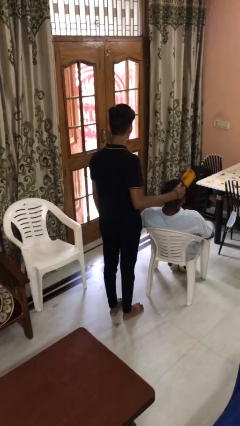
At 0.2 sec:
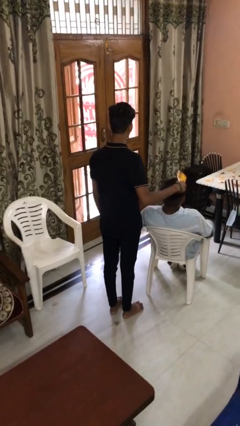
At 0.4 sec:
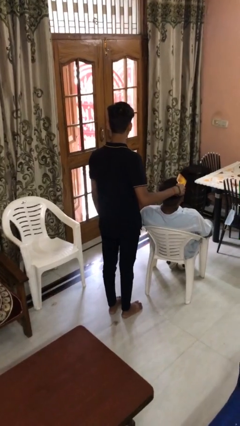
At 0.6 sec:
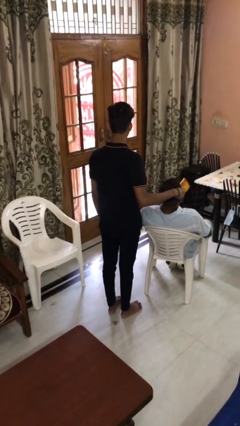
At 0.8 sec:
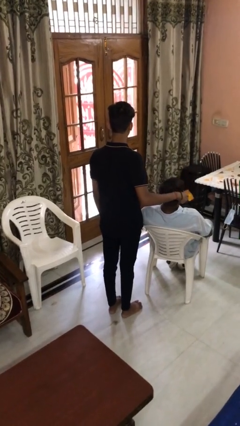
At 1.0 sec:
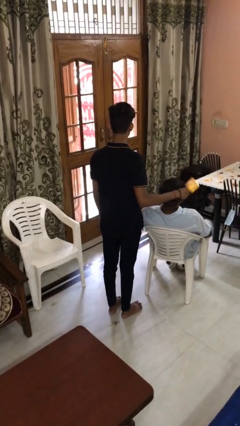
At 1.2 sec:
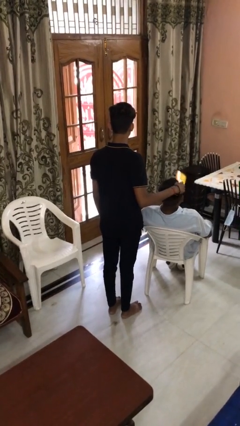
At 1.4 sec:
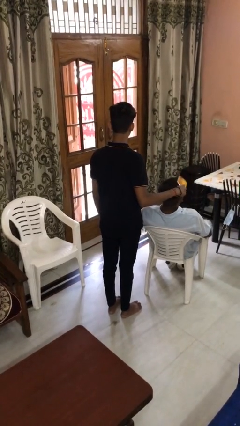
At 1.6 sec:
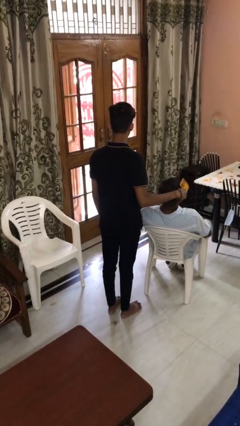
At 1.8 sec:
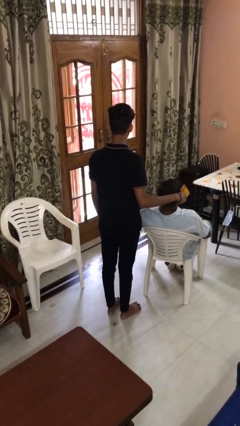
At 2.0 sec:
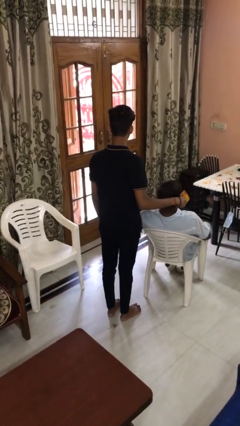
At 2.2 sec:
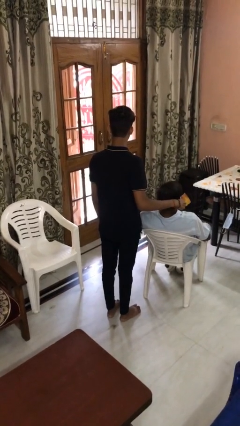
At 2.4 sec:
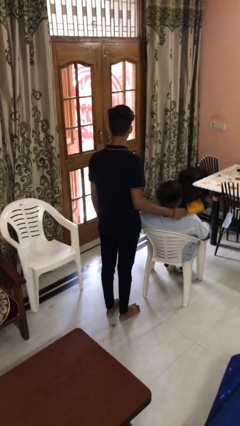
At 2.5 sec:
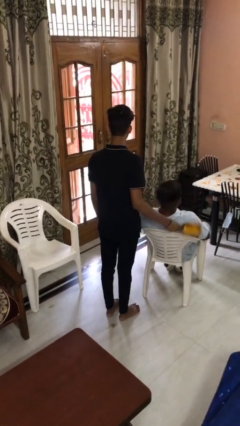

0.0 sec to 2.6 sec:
person brushes hair of person

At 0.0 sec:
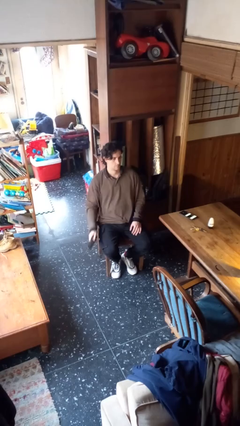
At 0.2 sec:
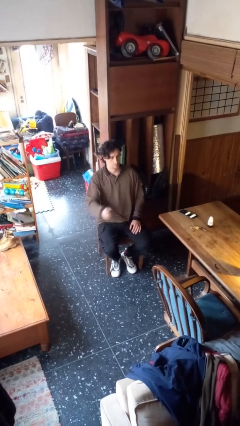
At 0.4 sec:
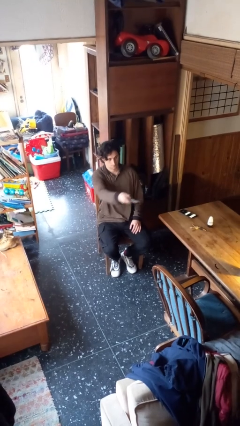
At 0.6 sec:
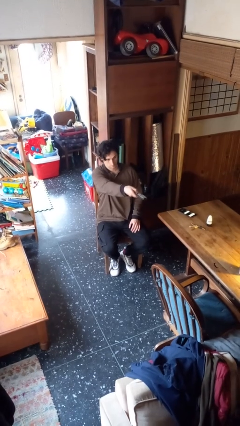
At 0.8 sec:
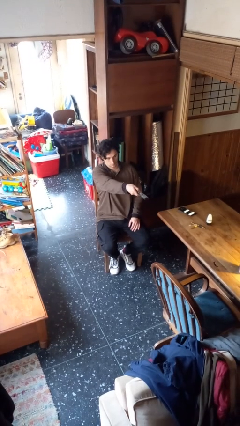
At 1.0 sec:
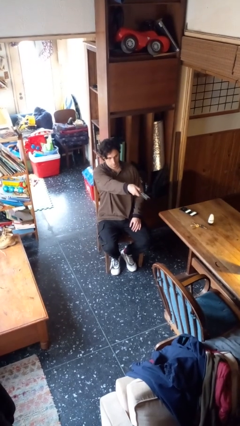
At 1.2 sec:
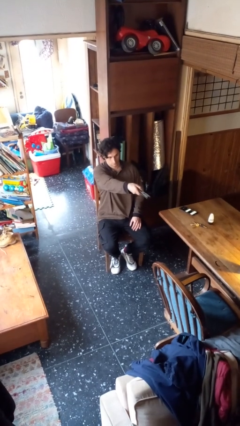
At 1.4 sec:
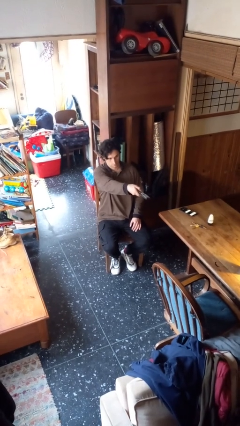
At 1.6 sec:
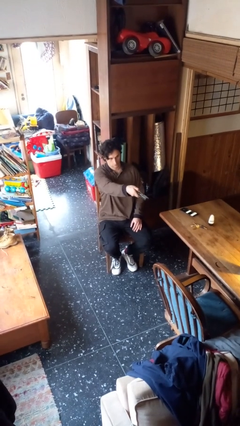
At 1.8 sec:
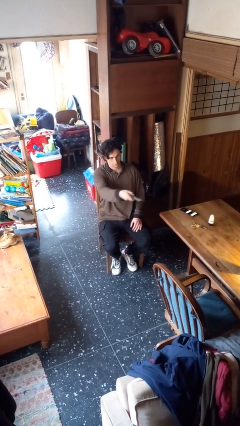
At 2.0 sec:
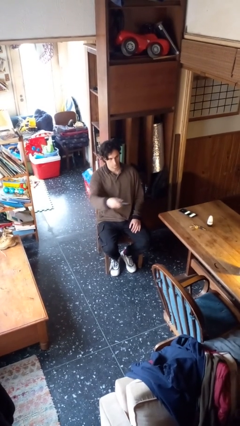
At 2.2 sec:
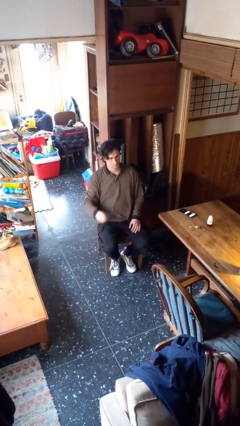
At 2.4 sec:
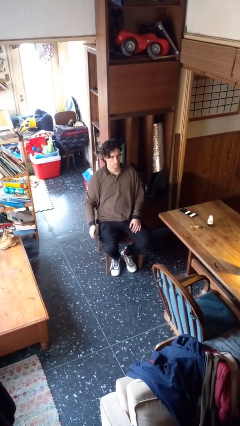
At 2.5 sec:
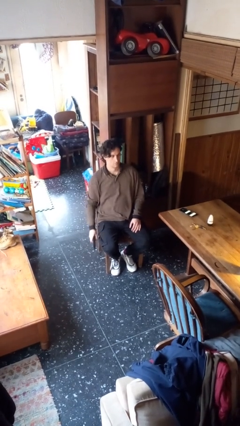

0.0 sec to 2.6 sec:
person uses television remote

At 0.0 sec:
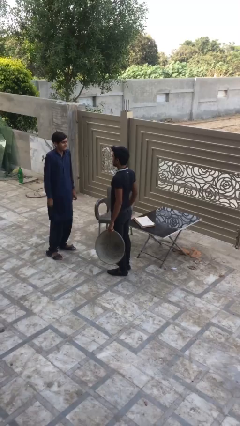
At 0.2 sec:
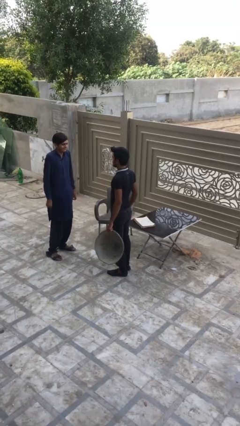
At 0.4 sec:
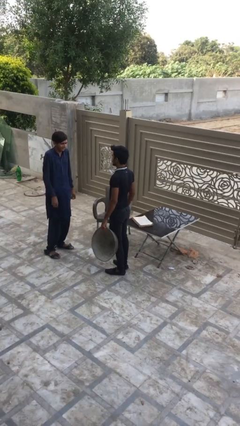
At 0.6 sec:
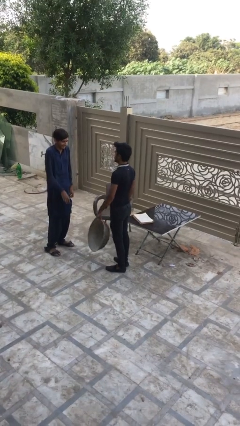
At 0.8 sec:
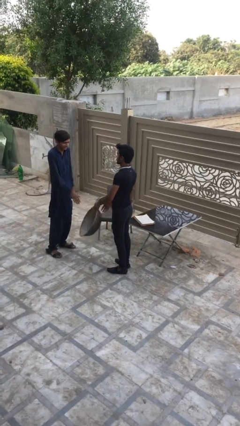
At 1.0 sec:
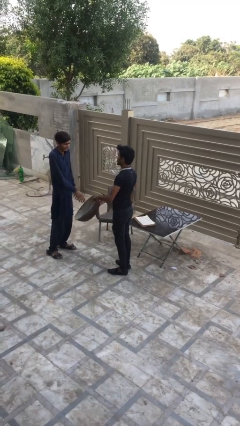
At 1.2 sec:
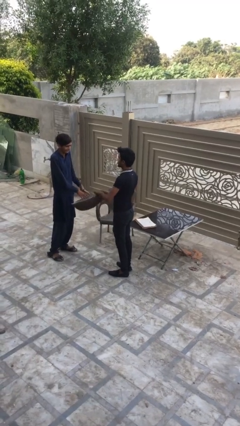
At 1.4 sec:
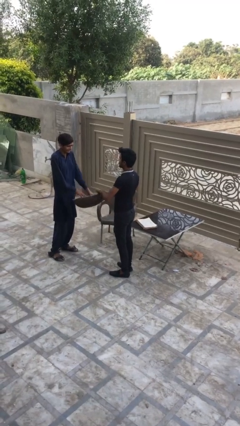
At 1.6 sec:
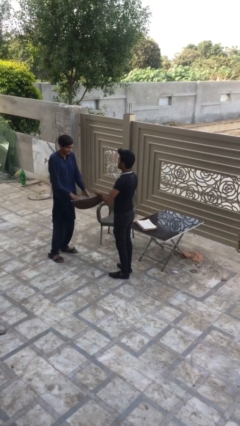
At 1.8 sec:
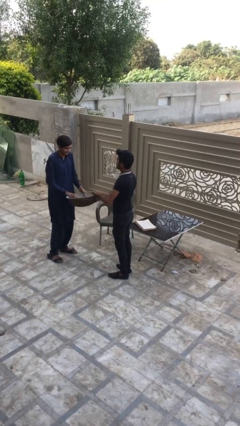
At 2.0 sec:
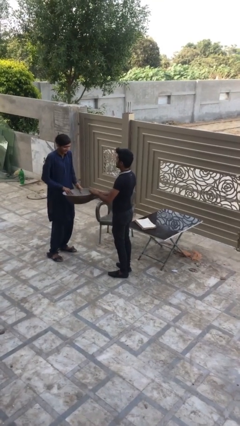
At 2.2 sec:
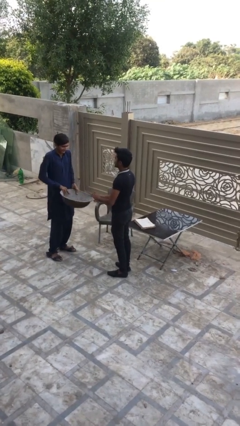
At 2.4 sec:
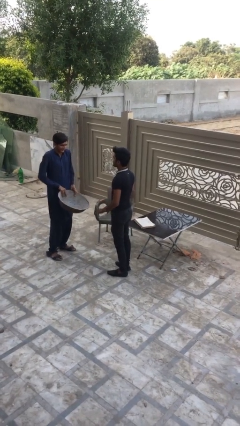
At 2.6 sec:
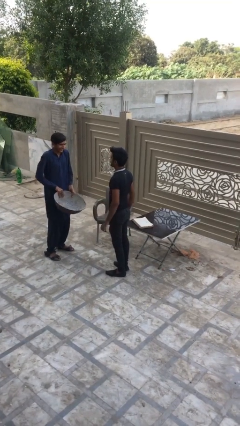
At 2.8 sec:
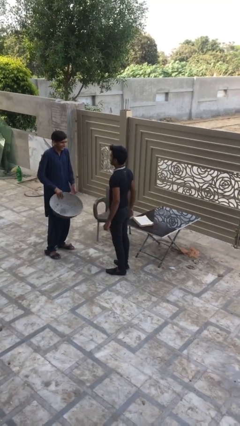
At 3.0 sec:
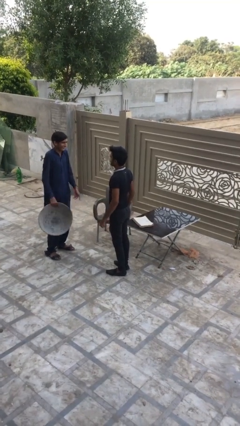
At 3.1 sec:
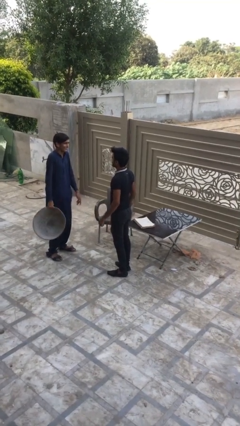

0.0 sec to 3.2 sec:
person transfers object to person

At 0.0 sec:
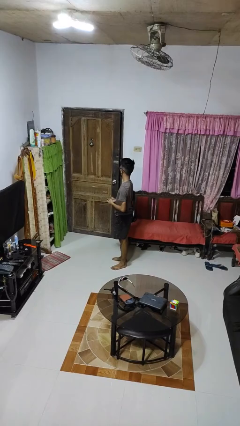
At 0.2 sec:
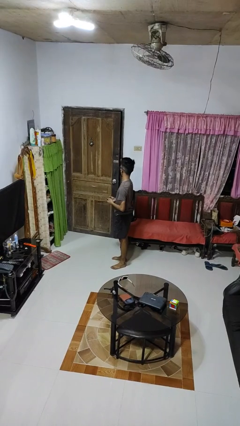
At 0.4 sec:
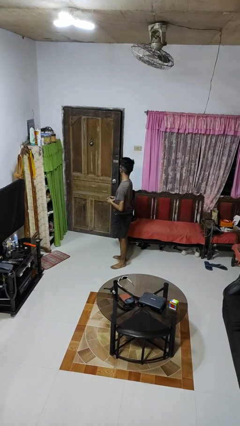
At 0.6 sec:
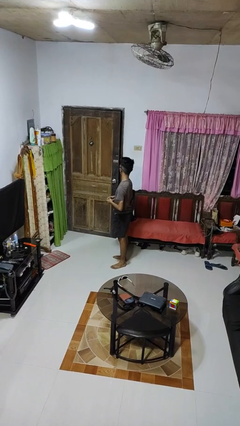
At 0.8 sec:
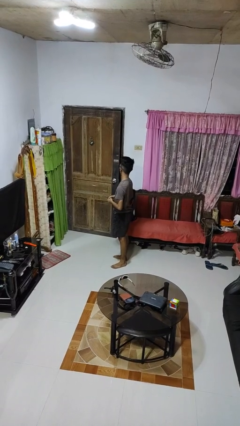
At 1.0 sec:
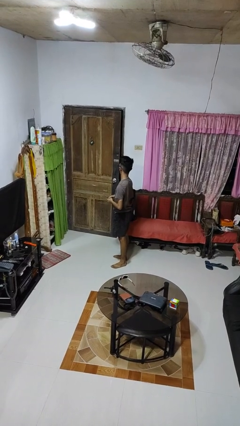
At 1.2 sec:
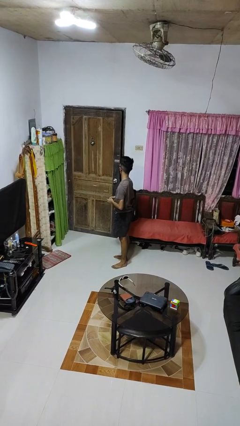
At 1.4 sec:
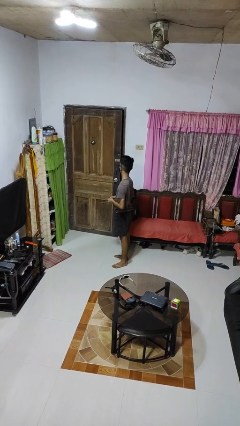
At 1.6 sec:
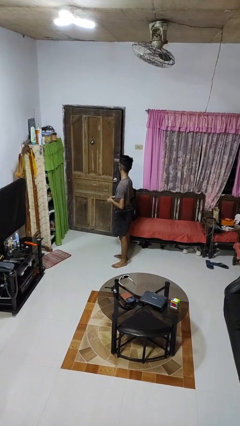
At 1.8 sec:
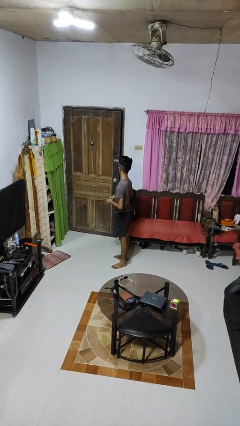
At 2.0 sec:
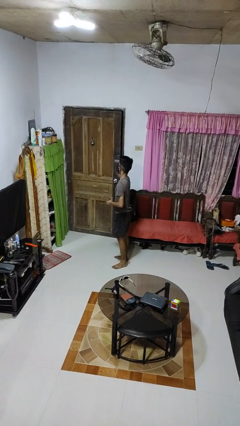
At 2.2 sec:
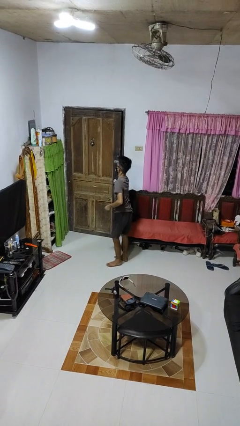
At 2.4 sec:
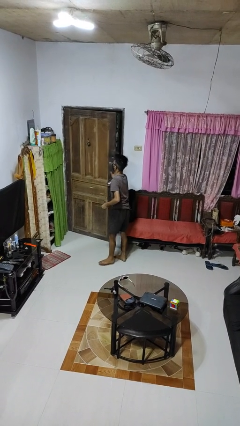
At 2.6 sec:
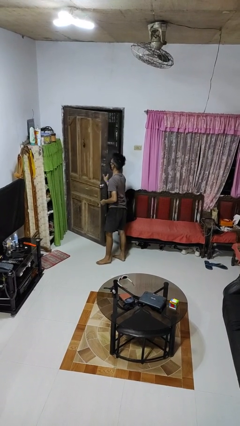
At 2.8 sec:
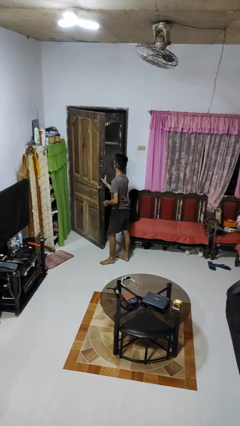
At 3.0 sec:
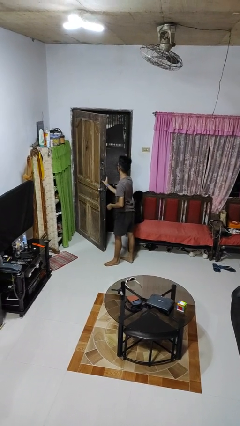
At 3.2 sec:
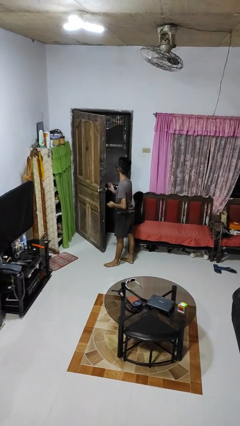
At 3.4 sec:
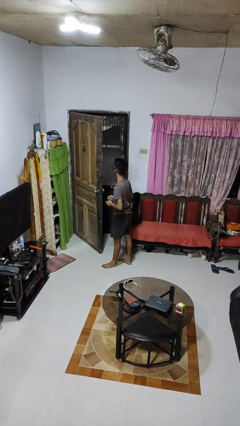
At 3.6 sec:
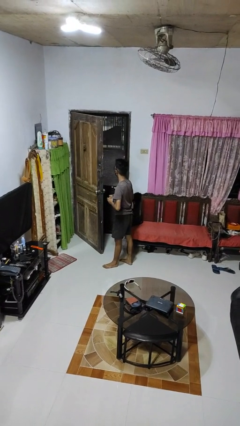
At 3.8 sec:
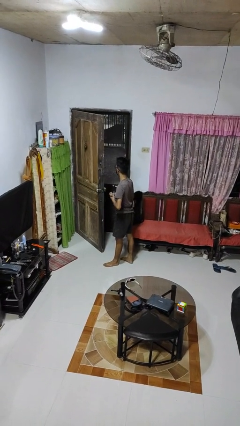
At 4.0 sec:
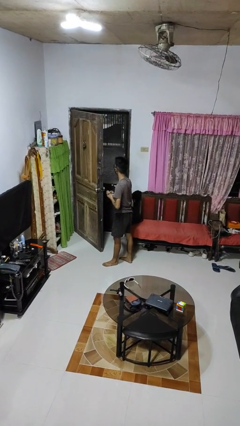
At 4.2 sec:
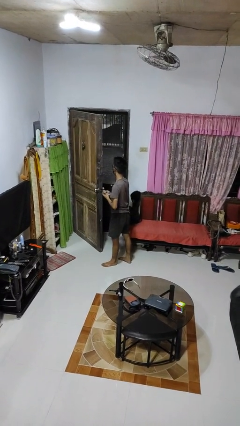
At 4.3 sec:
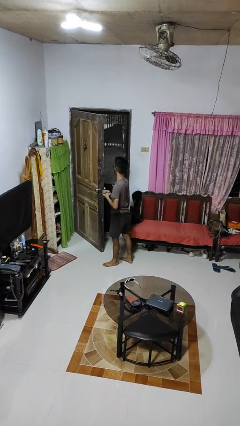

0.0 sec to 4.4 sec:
person opens facility door

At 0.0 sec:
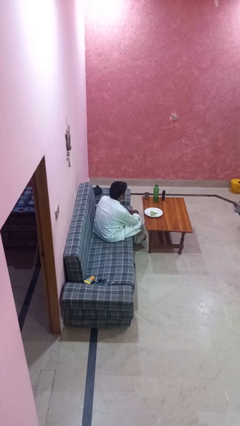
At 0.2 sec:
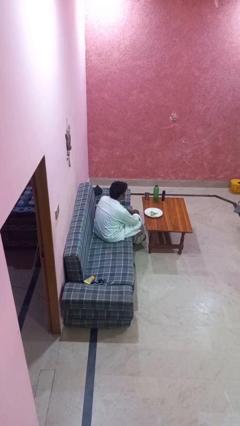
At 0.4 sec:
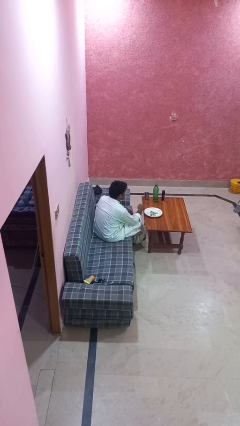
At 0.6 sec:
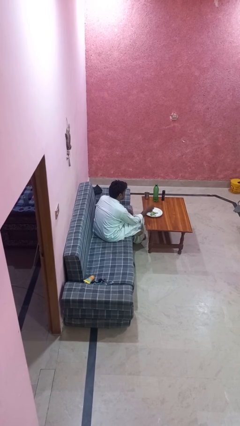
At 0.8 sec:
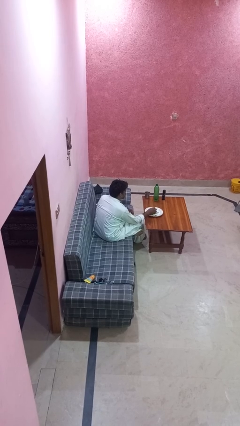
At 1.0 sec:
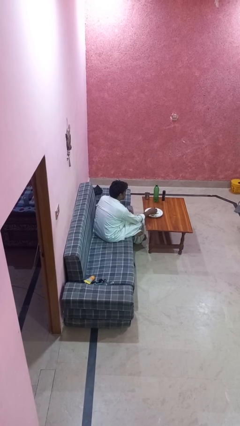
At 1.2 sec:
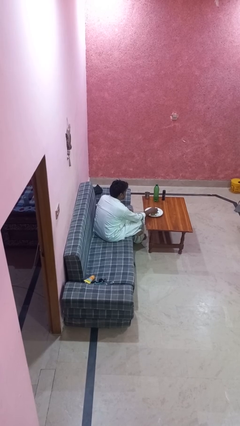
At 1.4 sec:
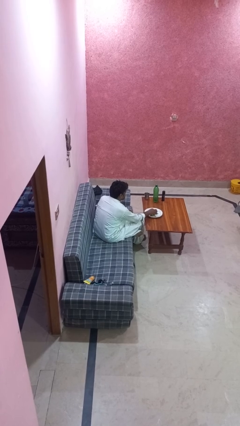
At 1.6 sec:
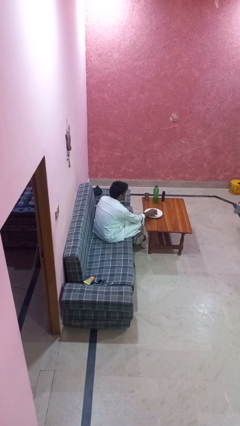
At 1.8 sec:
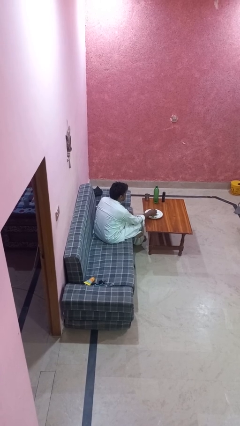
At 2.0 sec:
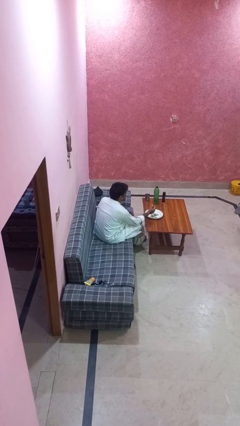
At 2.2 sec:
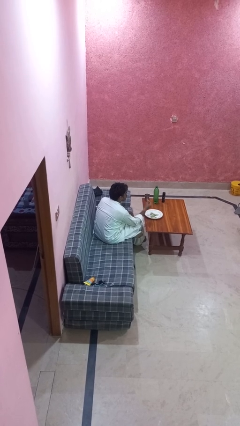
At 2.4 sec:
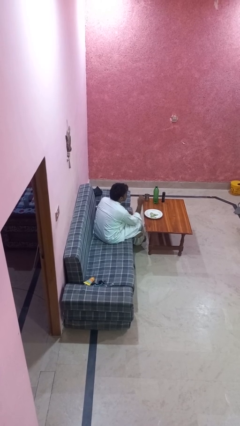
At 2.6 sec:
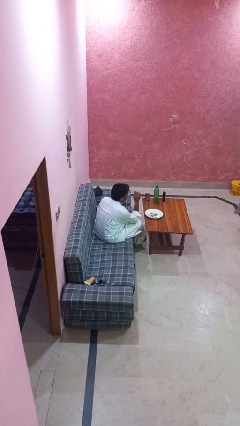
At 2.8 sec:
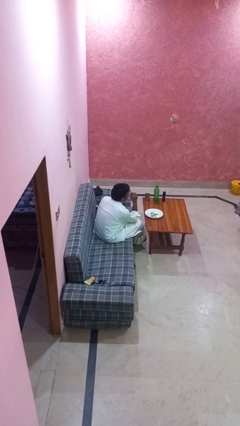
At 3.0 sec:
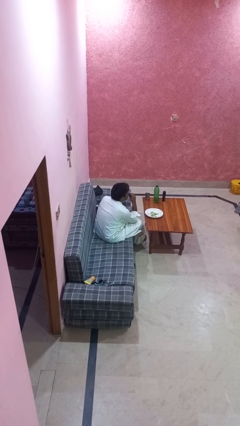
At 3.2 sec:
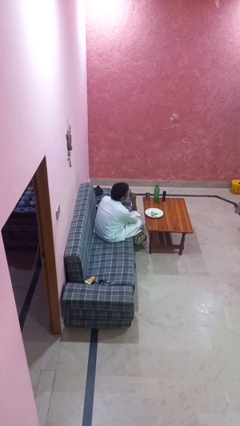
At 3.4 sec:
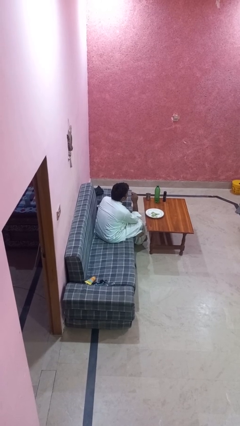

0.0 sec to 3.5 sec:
person eats with hands

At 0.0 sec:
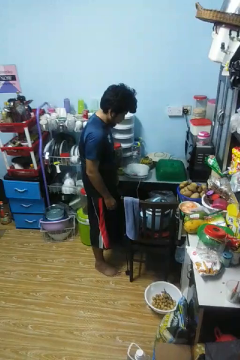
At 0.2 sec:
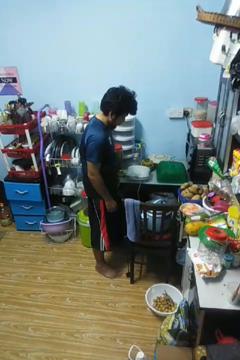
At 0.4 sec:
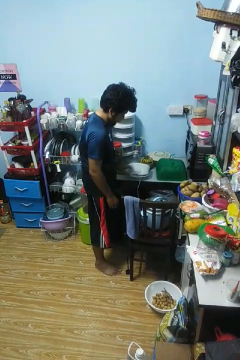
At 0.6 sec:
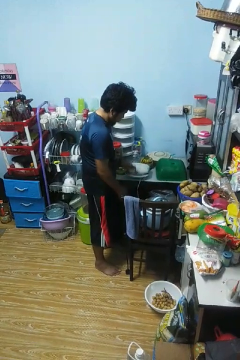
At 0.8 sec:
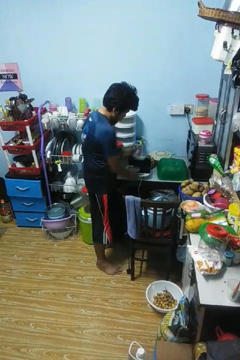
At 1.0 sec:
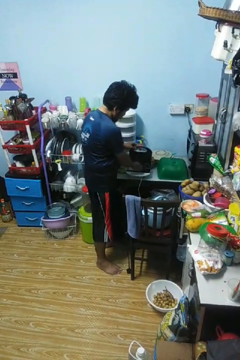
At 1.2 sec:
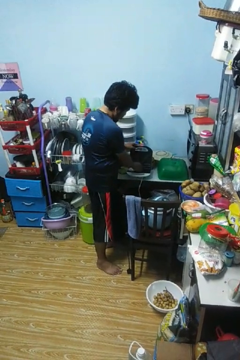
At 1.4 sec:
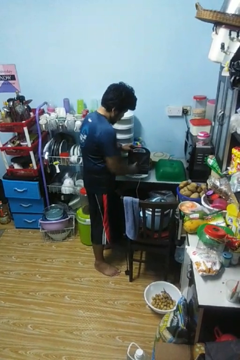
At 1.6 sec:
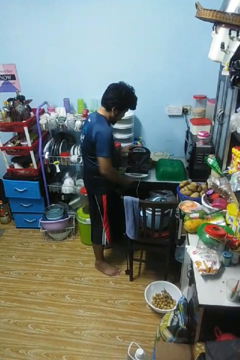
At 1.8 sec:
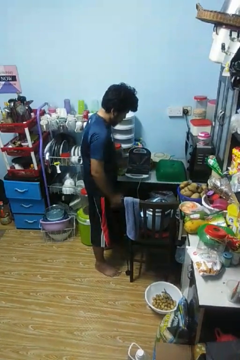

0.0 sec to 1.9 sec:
person takes object from toaster
